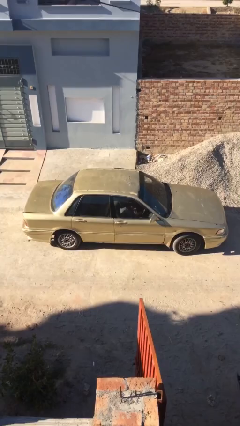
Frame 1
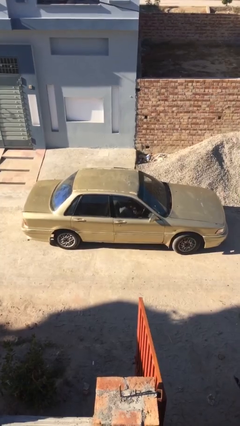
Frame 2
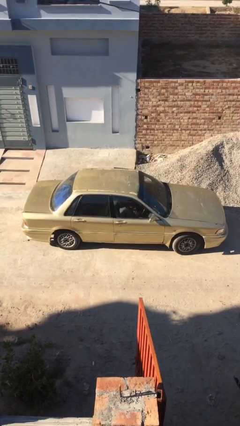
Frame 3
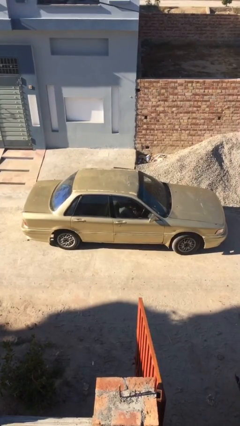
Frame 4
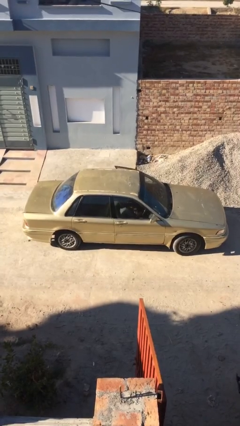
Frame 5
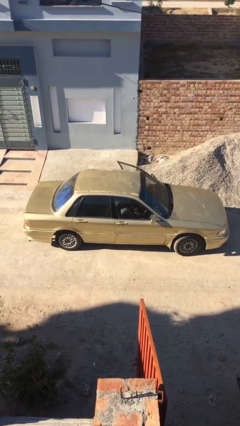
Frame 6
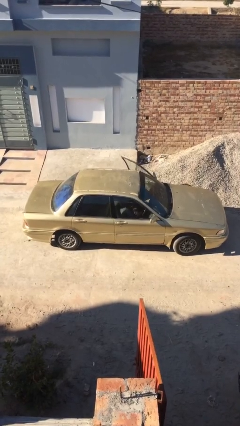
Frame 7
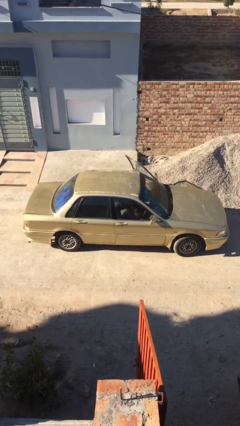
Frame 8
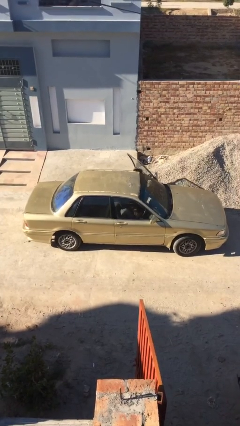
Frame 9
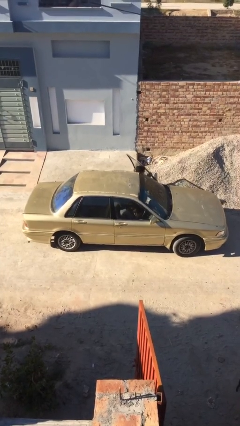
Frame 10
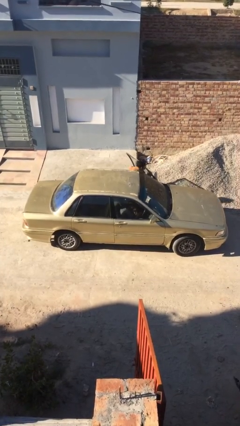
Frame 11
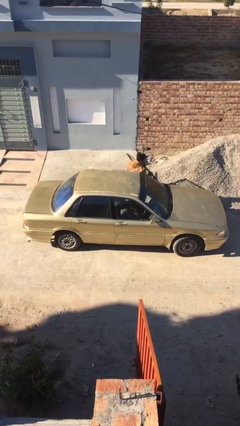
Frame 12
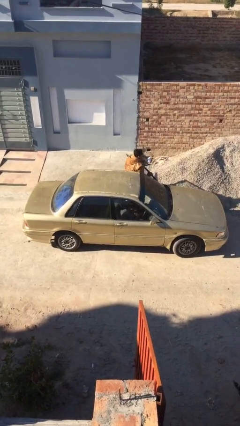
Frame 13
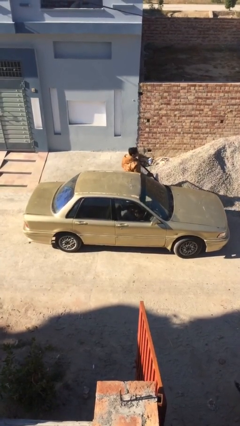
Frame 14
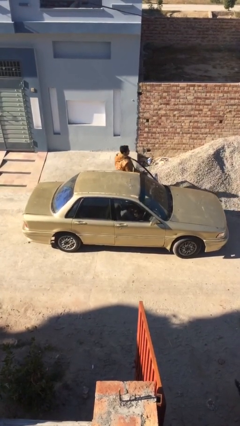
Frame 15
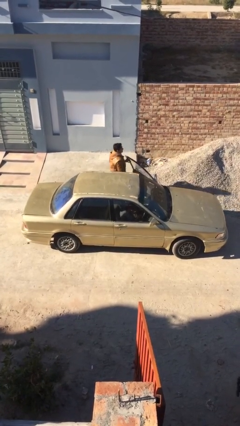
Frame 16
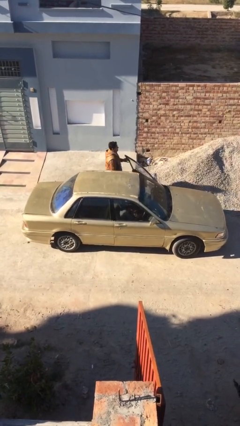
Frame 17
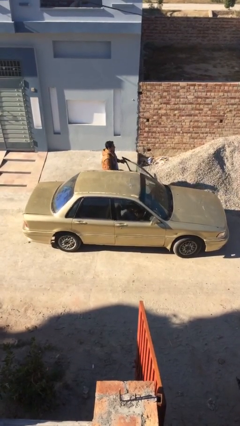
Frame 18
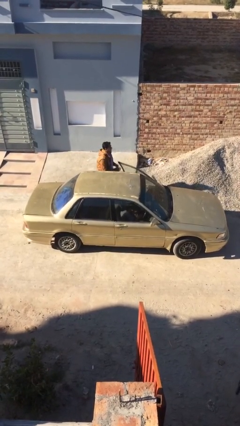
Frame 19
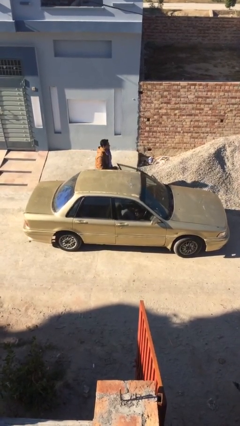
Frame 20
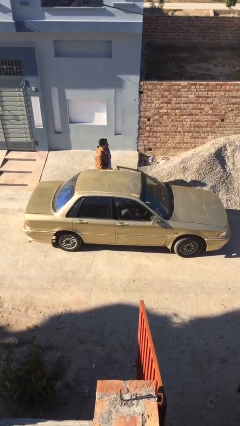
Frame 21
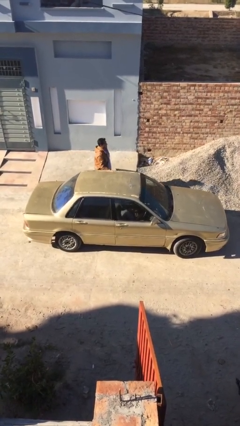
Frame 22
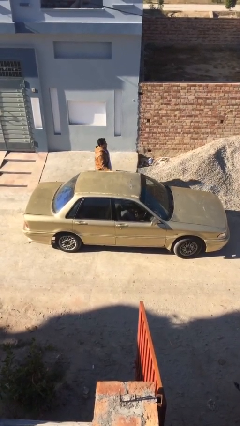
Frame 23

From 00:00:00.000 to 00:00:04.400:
car drops off person

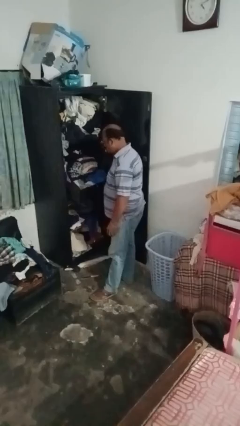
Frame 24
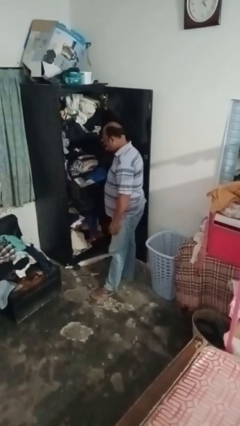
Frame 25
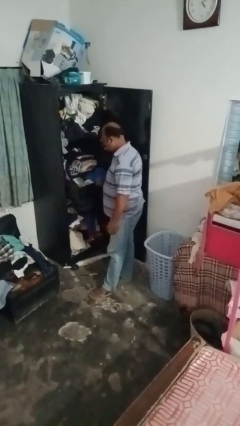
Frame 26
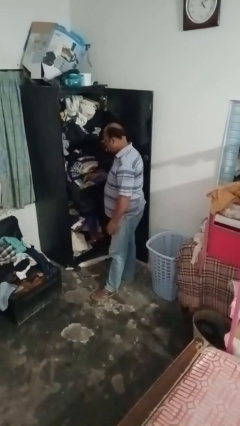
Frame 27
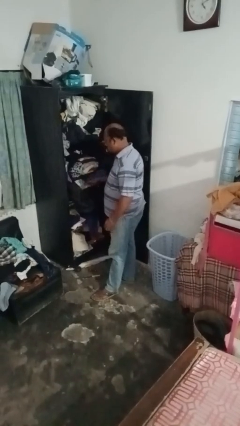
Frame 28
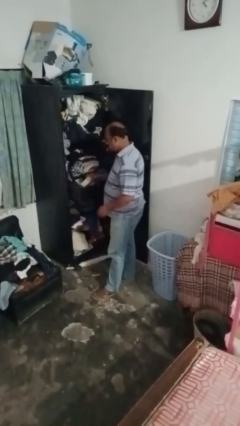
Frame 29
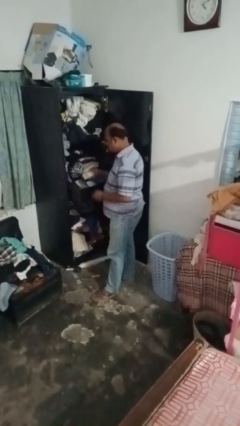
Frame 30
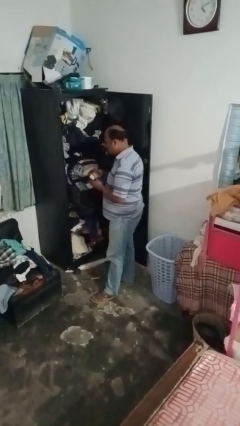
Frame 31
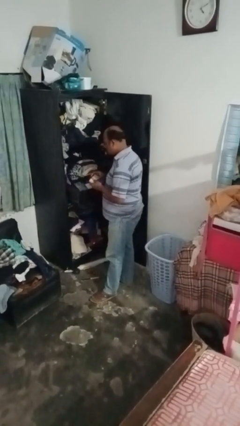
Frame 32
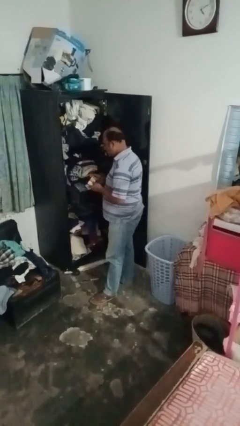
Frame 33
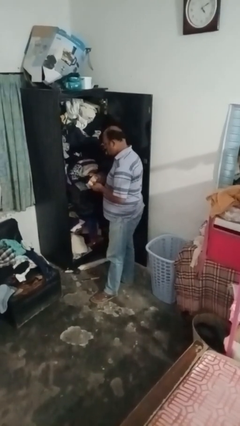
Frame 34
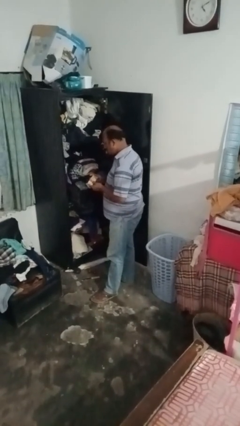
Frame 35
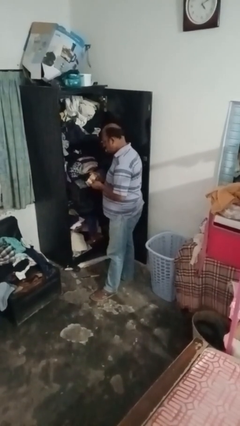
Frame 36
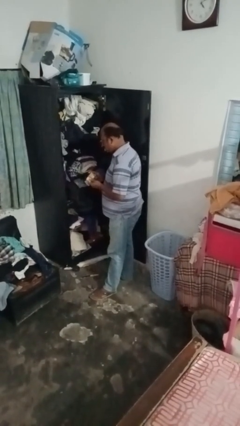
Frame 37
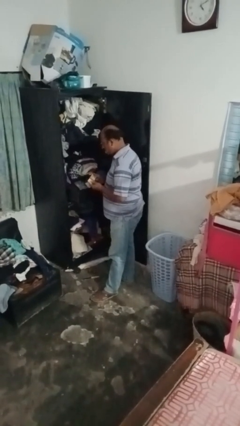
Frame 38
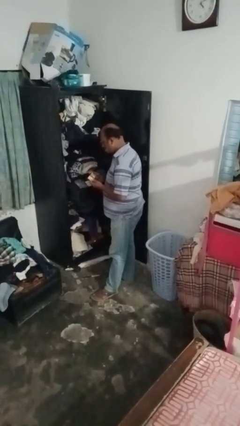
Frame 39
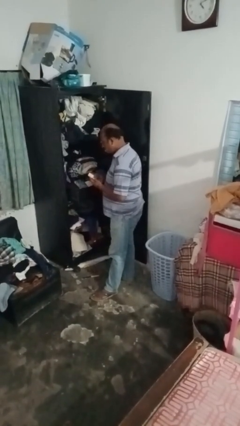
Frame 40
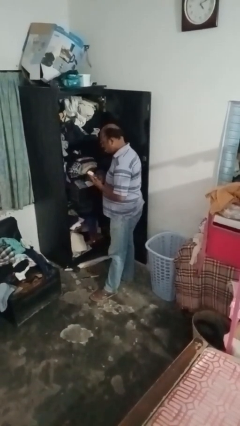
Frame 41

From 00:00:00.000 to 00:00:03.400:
person puts clothes into dresser

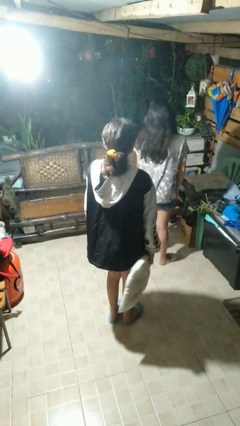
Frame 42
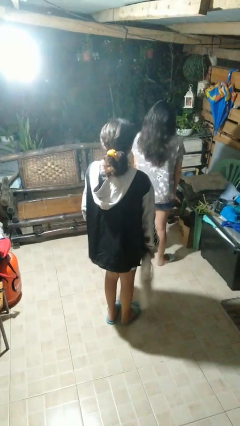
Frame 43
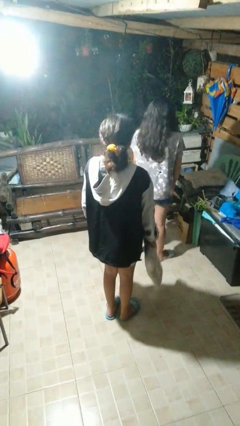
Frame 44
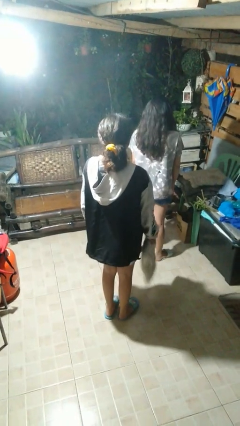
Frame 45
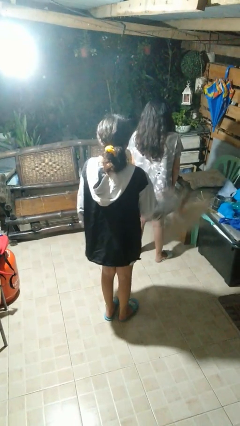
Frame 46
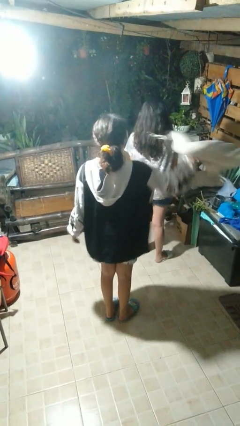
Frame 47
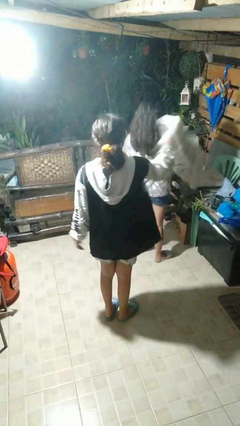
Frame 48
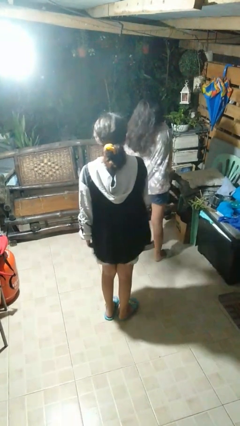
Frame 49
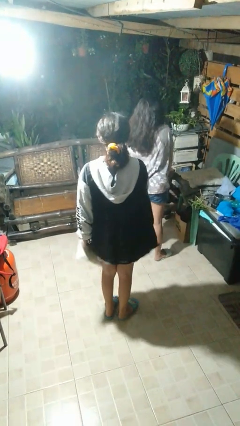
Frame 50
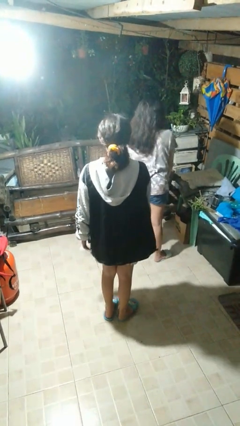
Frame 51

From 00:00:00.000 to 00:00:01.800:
person hits person with pillow

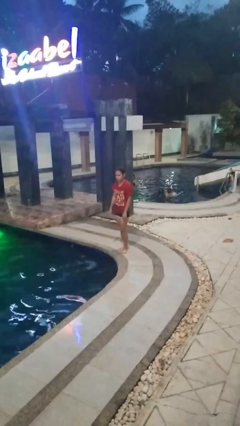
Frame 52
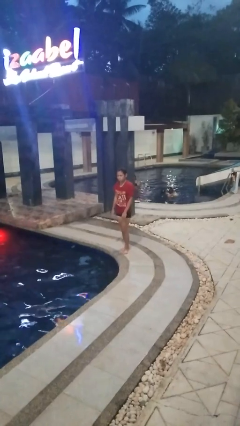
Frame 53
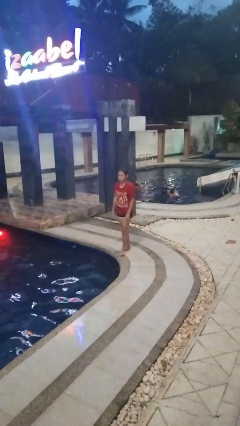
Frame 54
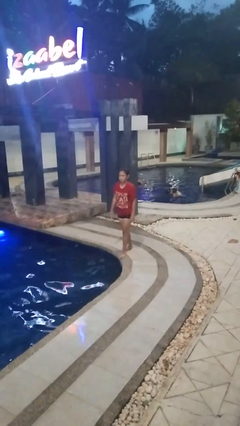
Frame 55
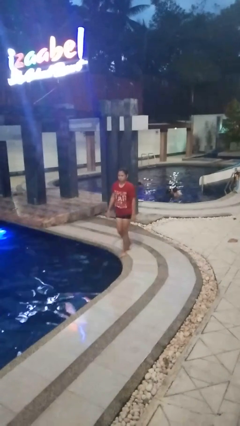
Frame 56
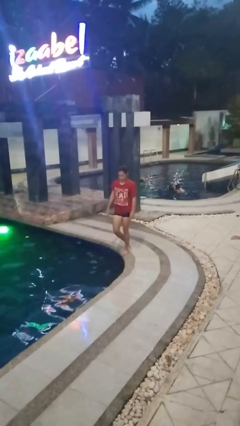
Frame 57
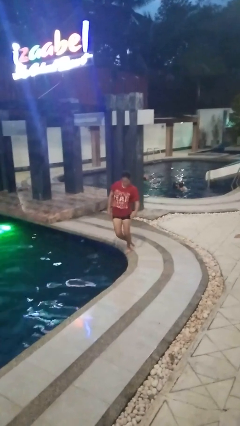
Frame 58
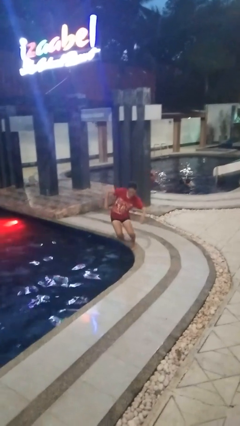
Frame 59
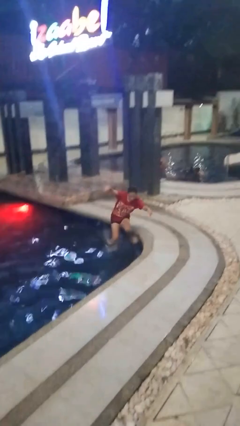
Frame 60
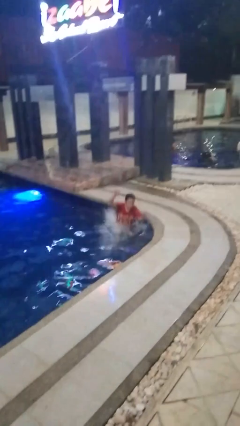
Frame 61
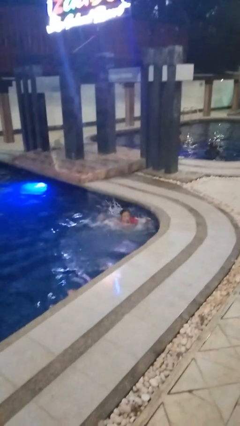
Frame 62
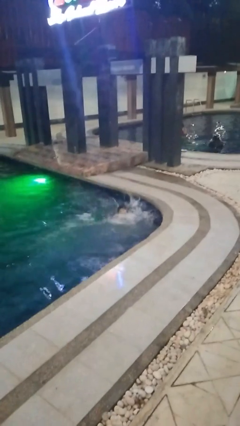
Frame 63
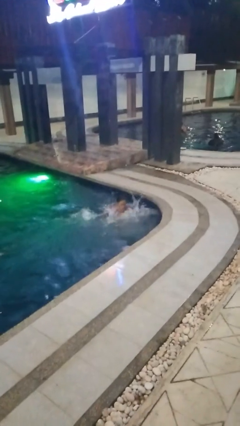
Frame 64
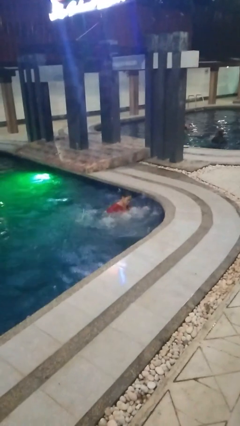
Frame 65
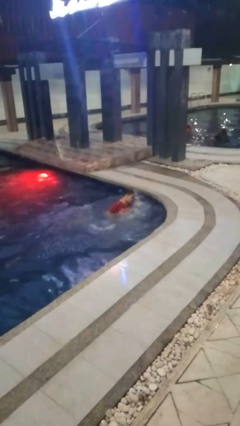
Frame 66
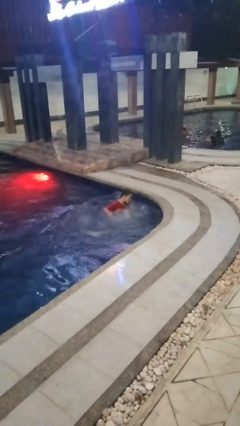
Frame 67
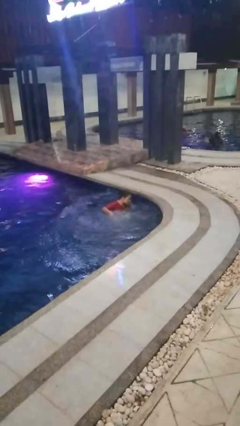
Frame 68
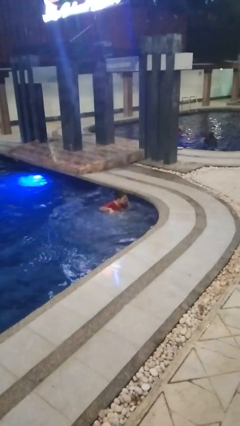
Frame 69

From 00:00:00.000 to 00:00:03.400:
person falls into pool

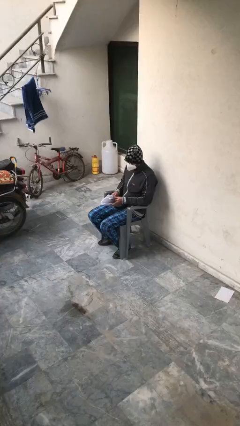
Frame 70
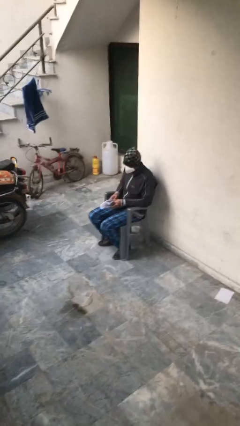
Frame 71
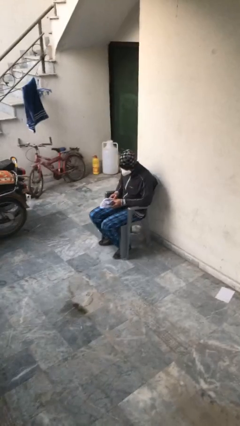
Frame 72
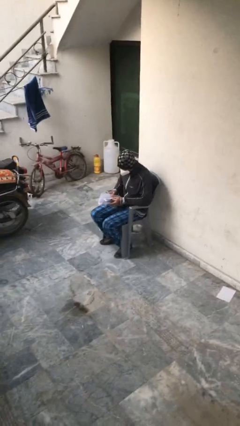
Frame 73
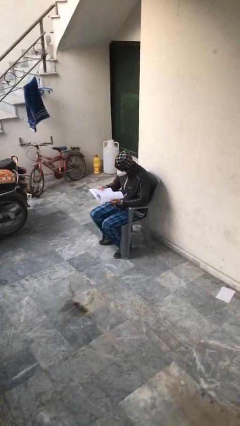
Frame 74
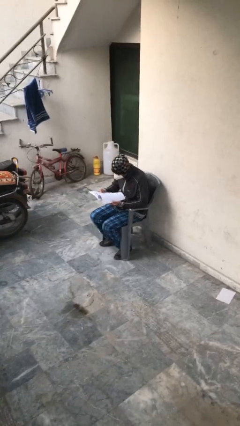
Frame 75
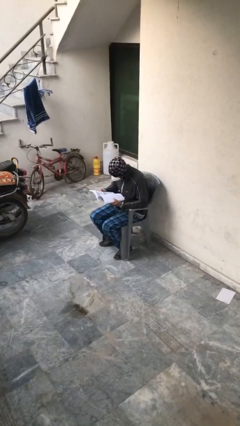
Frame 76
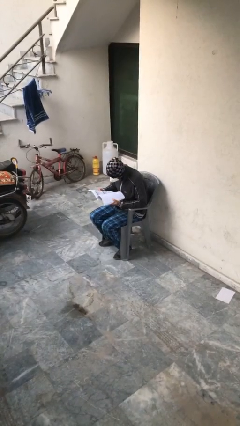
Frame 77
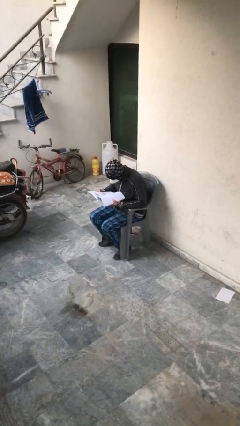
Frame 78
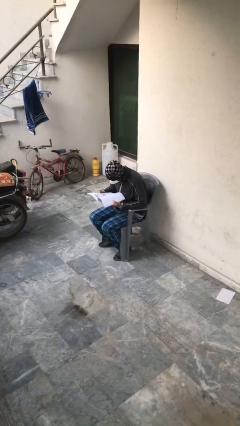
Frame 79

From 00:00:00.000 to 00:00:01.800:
person reads document

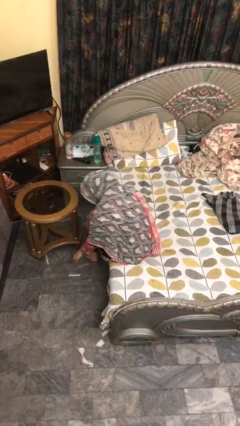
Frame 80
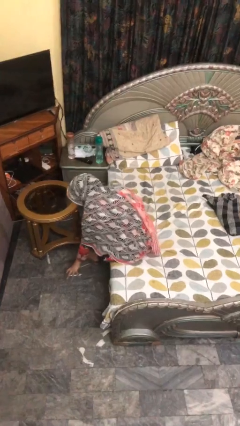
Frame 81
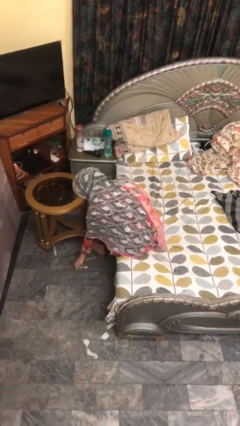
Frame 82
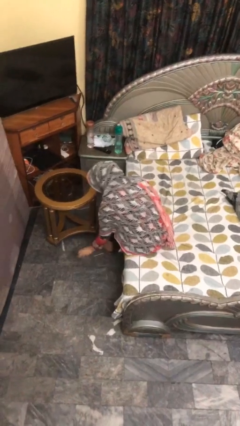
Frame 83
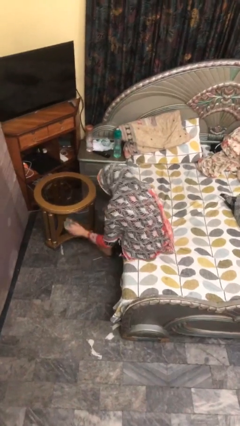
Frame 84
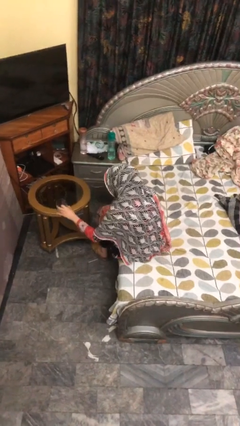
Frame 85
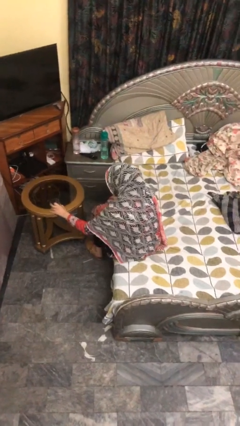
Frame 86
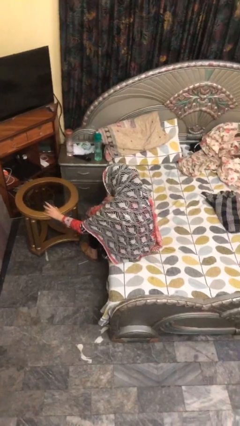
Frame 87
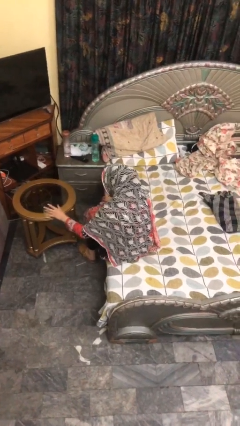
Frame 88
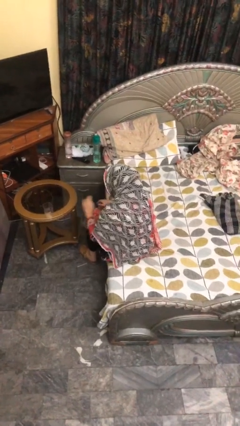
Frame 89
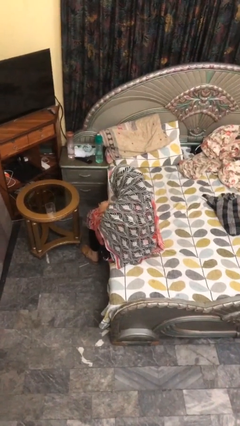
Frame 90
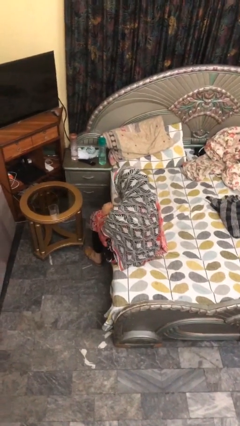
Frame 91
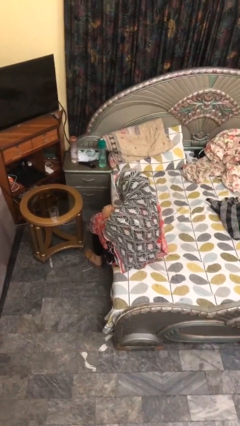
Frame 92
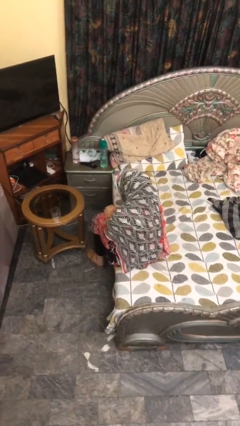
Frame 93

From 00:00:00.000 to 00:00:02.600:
person sets upright glass

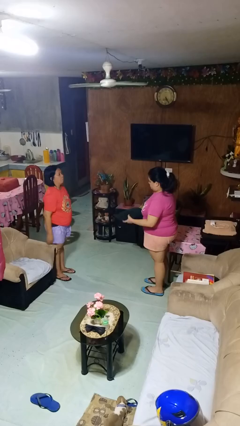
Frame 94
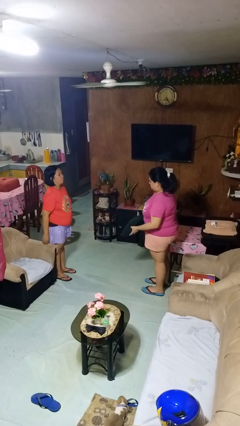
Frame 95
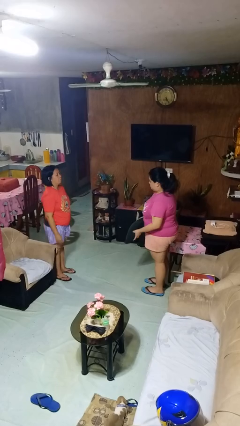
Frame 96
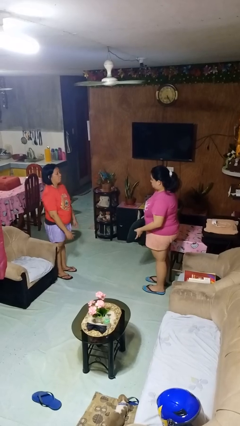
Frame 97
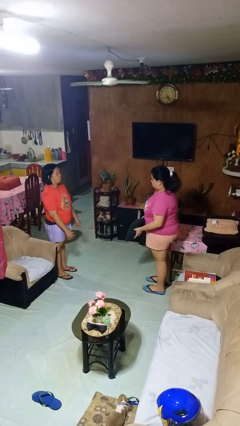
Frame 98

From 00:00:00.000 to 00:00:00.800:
person catches object from person
